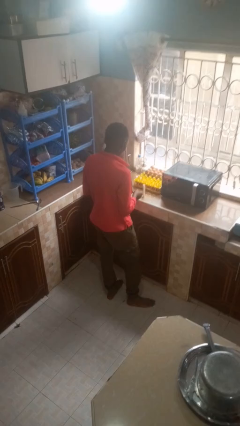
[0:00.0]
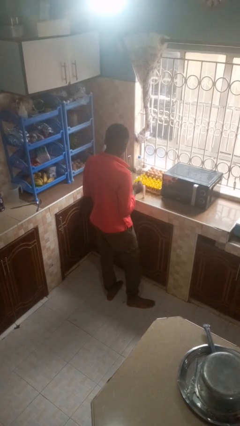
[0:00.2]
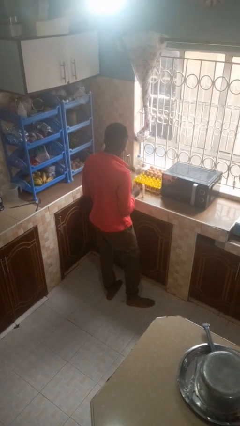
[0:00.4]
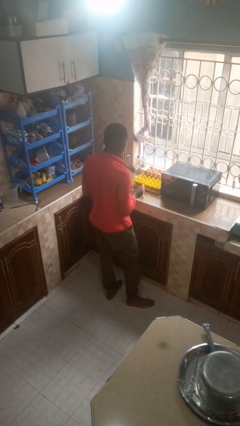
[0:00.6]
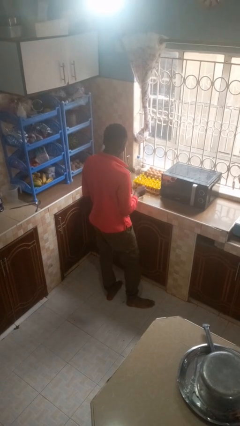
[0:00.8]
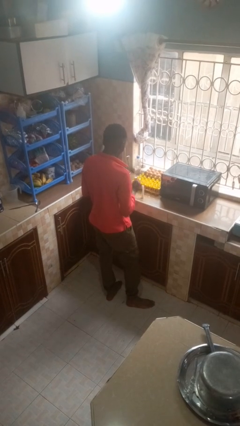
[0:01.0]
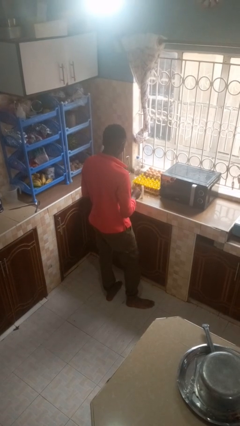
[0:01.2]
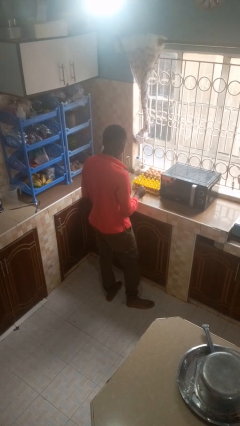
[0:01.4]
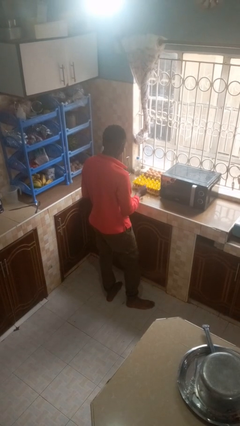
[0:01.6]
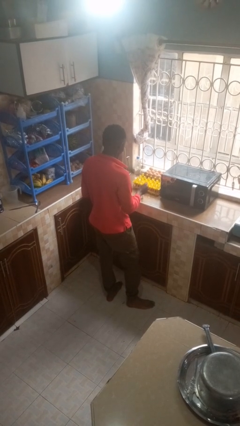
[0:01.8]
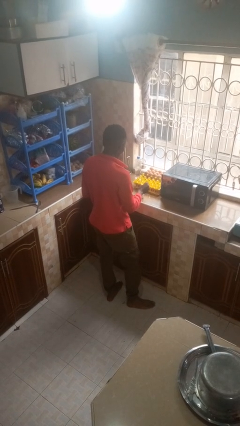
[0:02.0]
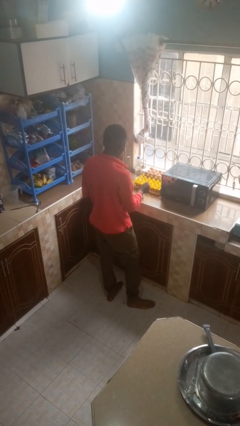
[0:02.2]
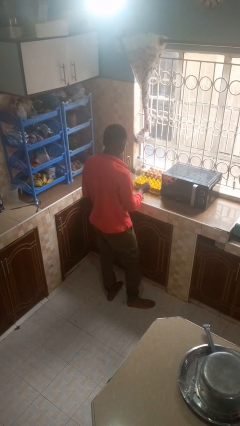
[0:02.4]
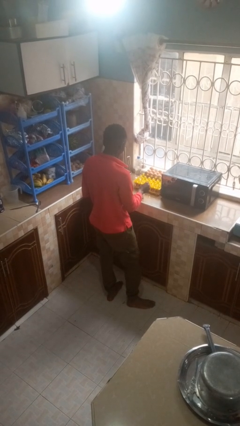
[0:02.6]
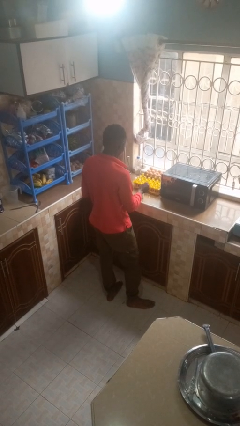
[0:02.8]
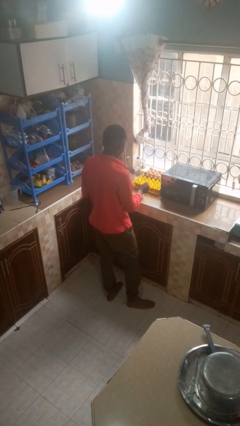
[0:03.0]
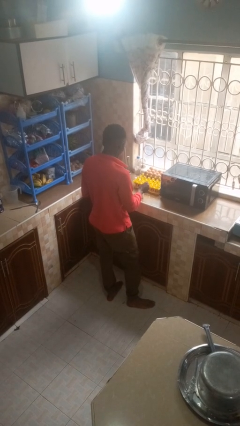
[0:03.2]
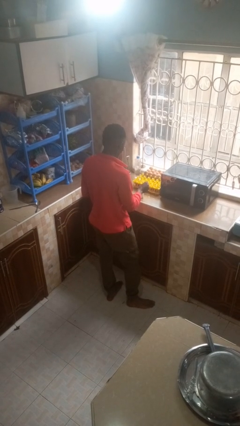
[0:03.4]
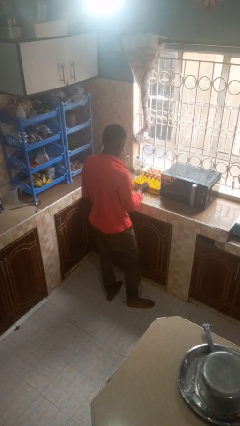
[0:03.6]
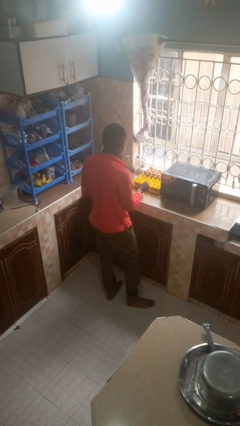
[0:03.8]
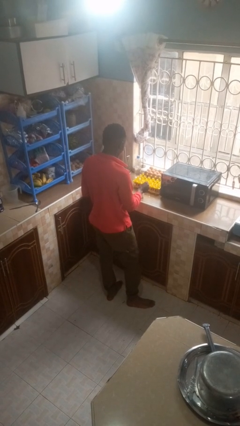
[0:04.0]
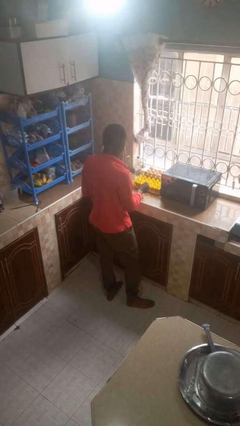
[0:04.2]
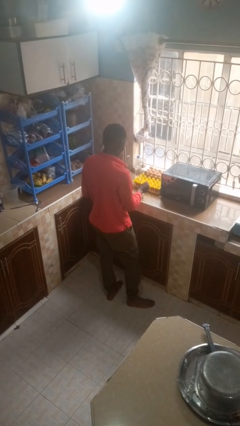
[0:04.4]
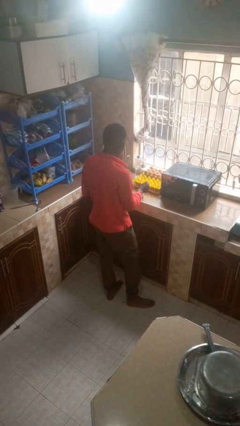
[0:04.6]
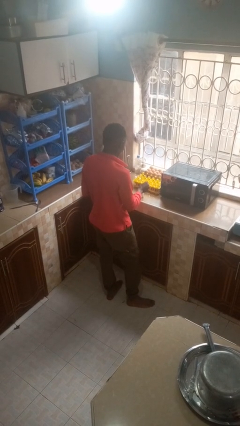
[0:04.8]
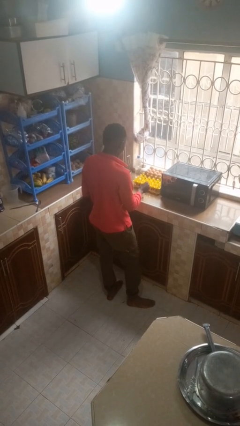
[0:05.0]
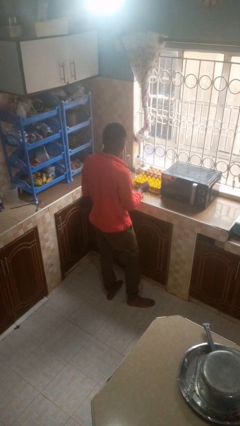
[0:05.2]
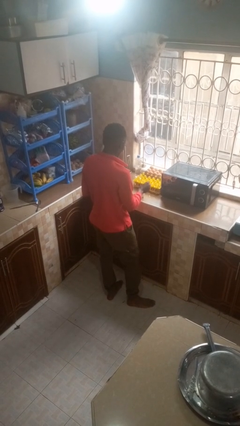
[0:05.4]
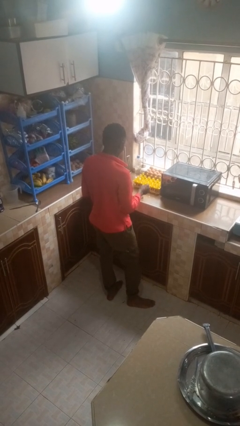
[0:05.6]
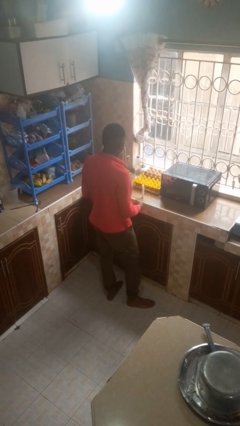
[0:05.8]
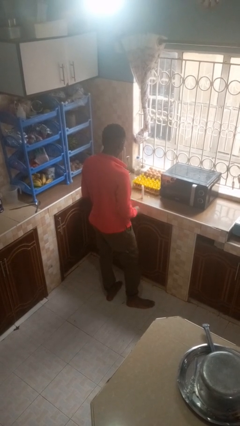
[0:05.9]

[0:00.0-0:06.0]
person lights candle

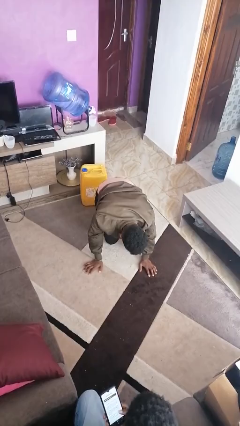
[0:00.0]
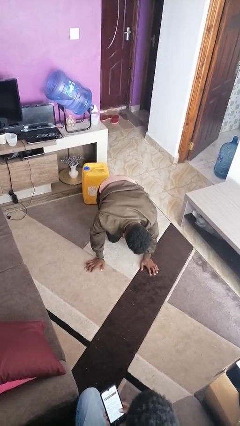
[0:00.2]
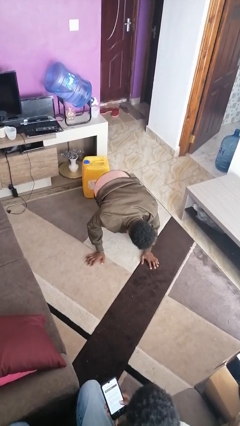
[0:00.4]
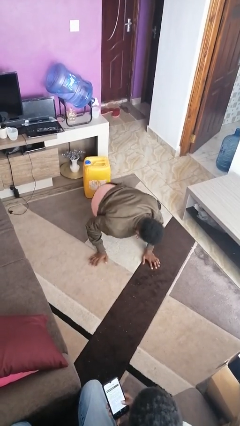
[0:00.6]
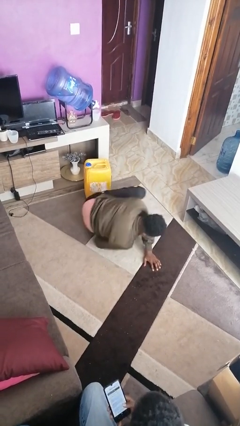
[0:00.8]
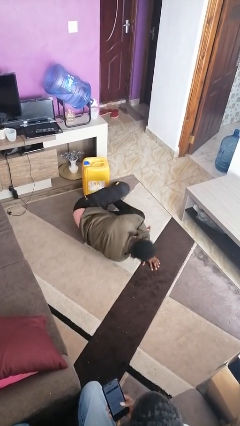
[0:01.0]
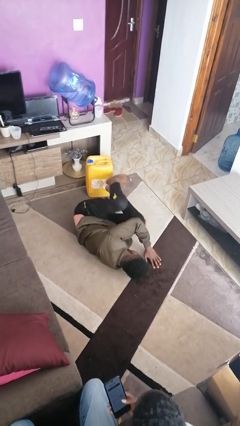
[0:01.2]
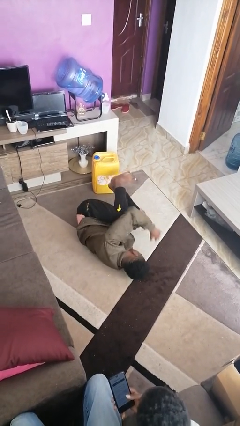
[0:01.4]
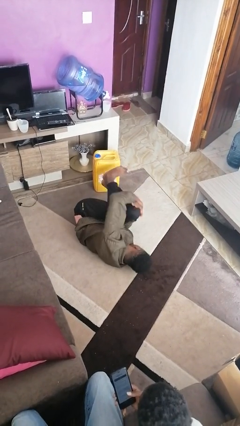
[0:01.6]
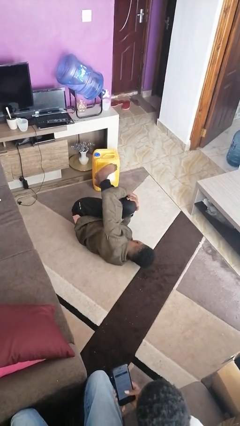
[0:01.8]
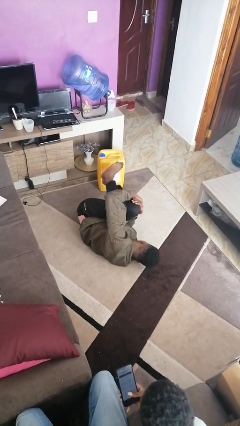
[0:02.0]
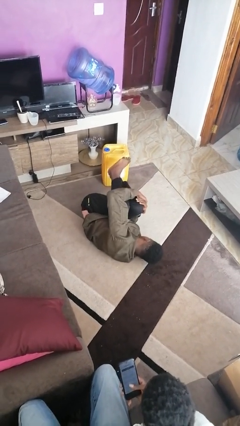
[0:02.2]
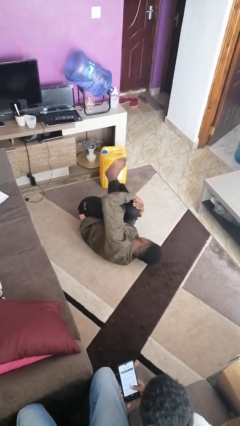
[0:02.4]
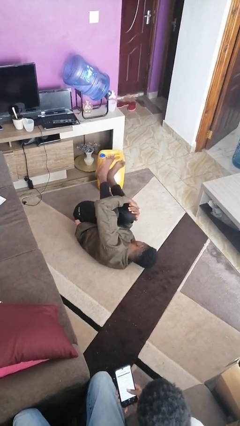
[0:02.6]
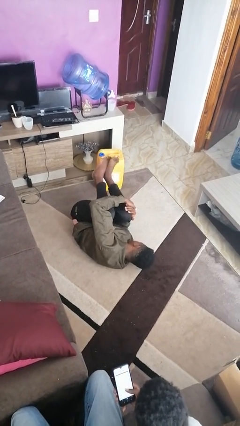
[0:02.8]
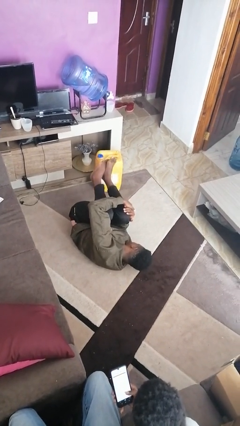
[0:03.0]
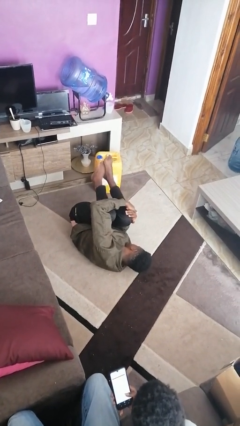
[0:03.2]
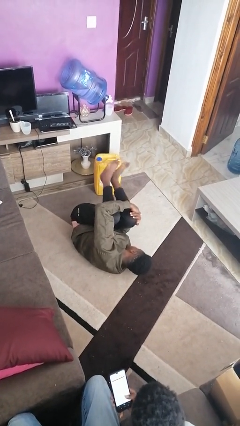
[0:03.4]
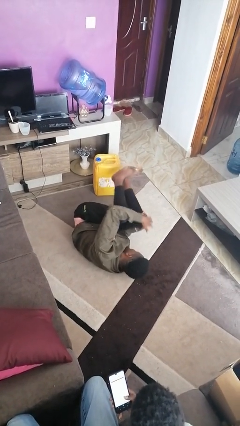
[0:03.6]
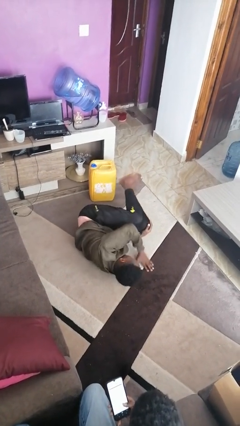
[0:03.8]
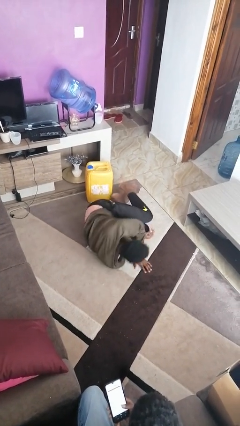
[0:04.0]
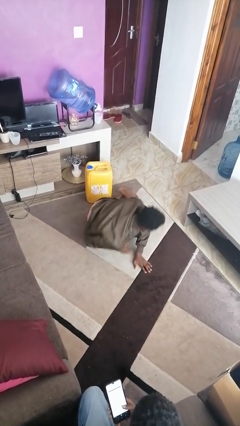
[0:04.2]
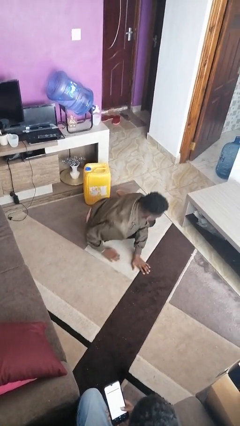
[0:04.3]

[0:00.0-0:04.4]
person lies down on floor

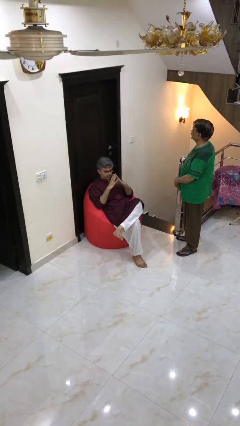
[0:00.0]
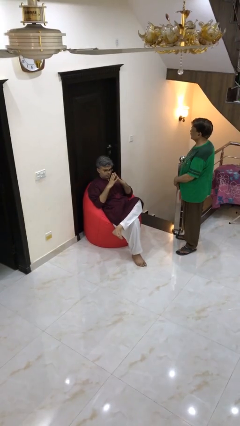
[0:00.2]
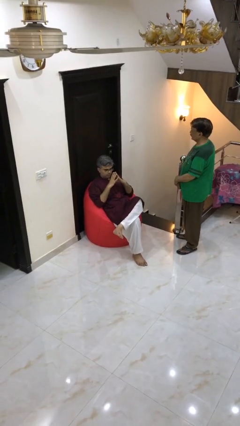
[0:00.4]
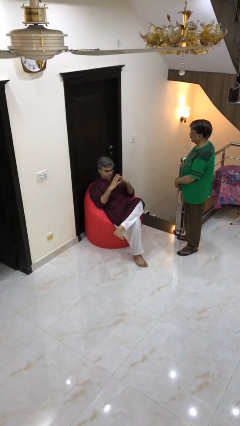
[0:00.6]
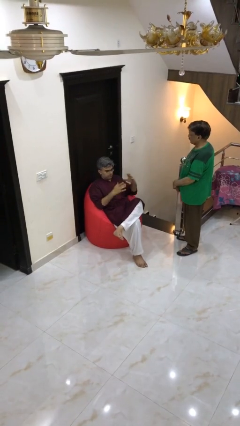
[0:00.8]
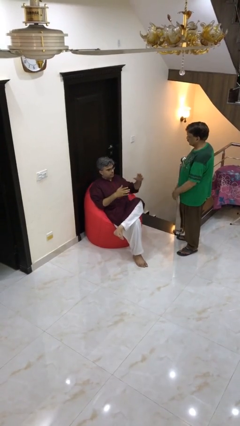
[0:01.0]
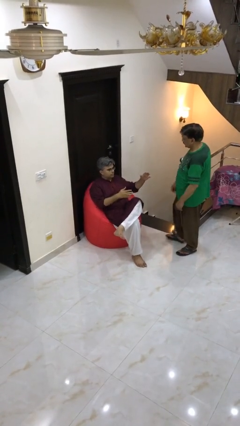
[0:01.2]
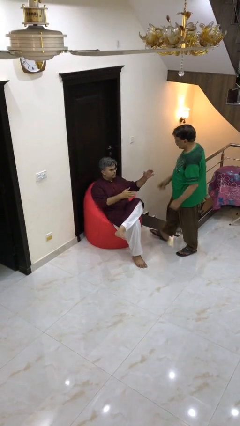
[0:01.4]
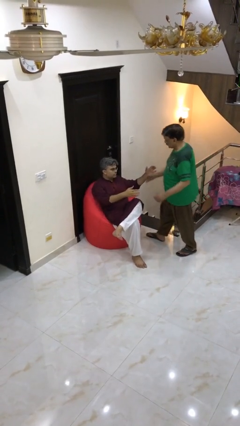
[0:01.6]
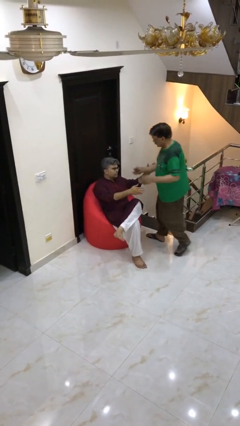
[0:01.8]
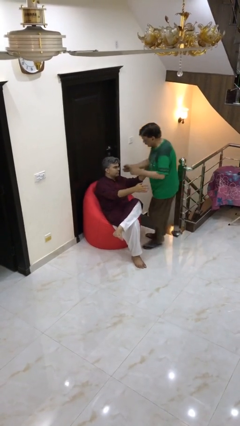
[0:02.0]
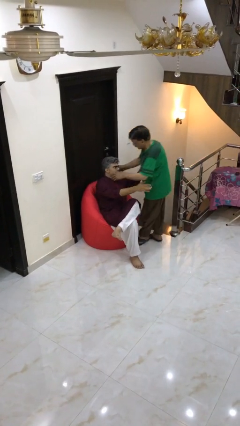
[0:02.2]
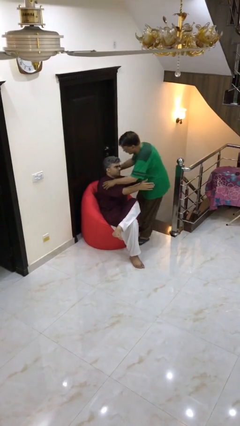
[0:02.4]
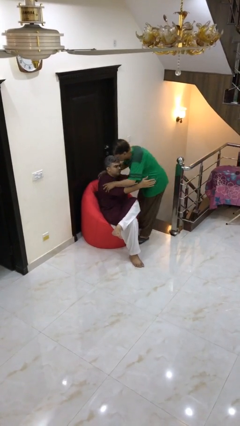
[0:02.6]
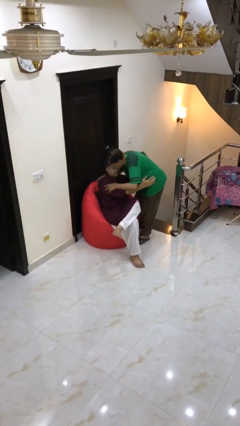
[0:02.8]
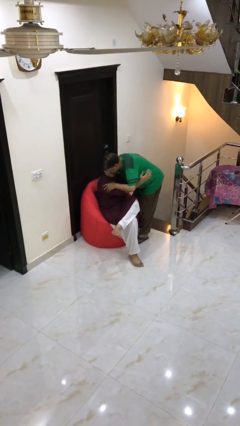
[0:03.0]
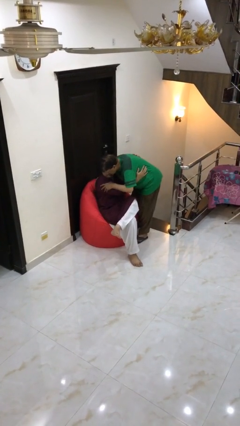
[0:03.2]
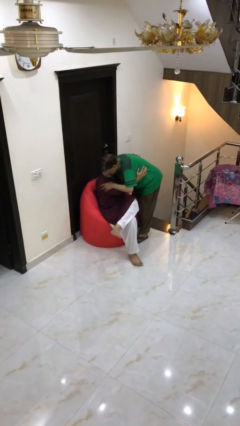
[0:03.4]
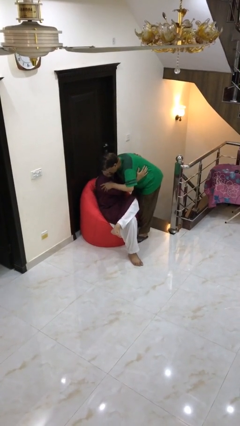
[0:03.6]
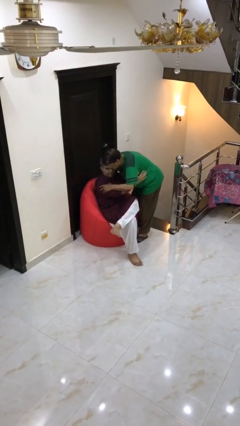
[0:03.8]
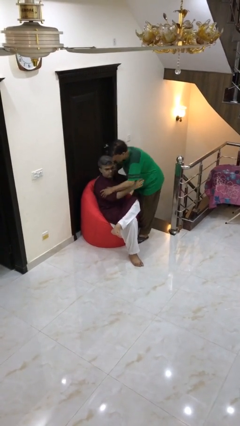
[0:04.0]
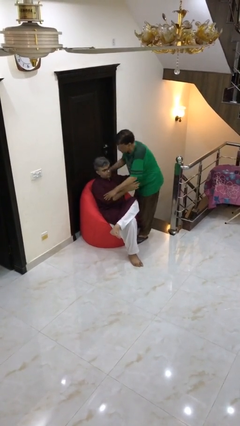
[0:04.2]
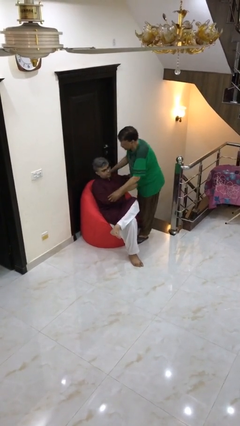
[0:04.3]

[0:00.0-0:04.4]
person embraces person

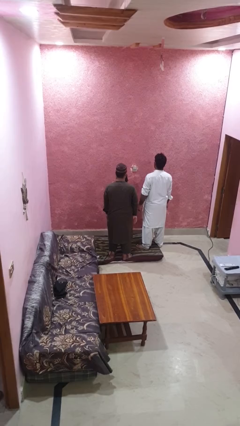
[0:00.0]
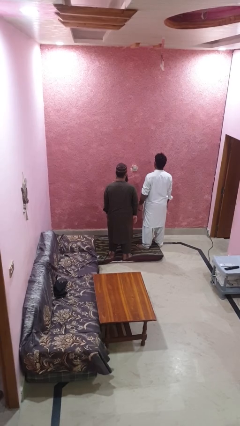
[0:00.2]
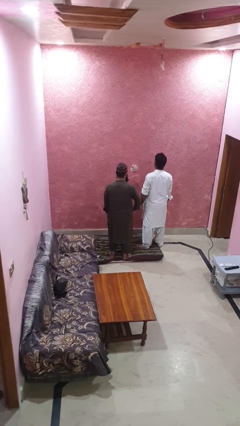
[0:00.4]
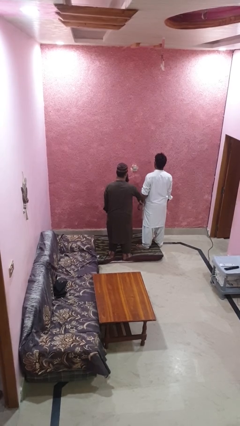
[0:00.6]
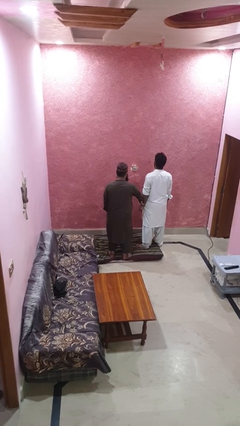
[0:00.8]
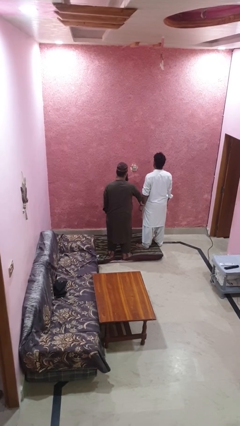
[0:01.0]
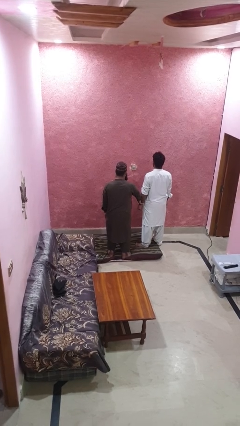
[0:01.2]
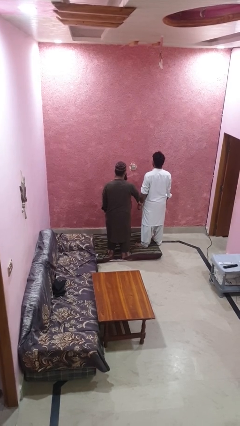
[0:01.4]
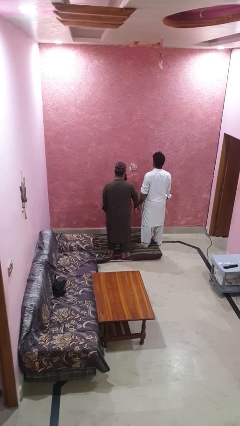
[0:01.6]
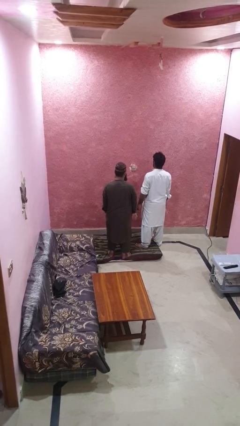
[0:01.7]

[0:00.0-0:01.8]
person grabs person by forearm

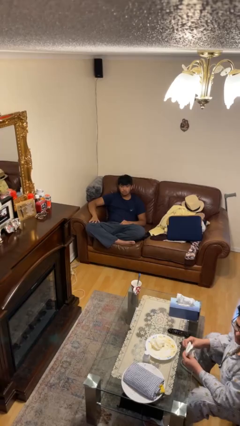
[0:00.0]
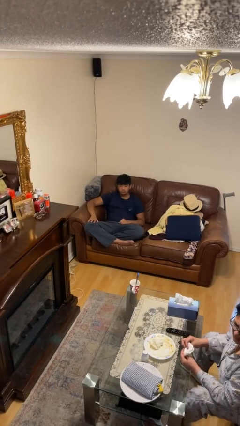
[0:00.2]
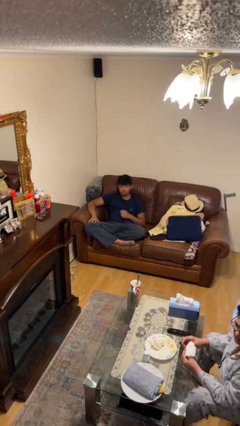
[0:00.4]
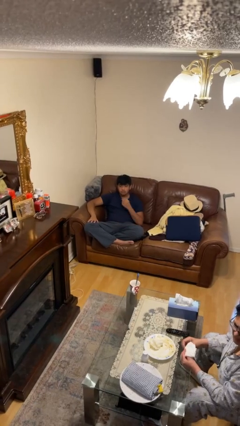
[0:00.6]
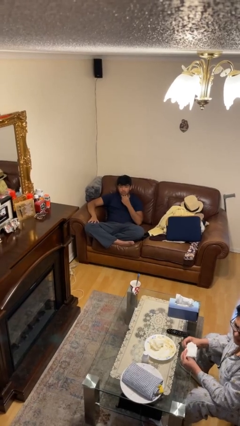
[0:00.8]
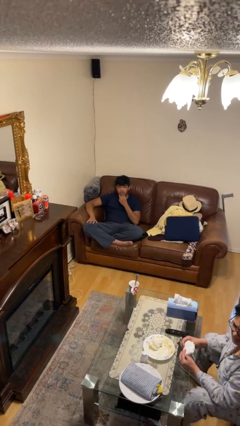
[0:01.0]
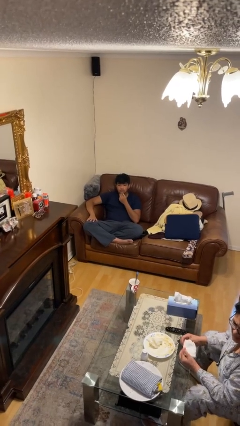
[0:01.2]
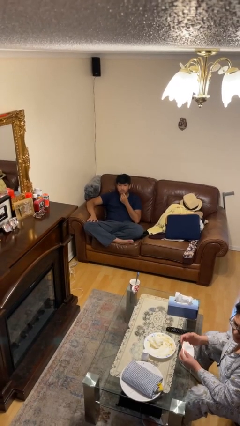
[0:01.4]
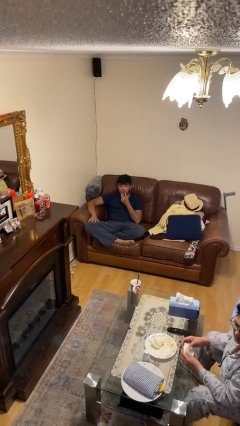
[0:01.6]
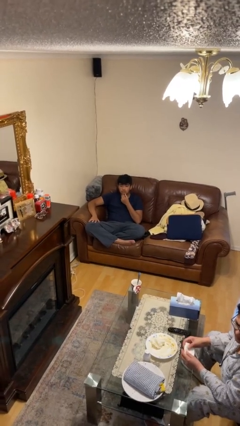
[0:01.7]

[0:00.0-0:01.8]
person strokes chin
